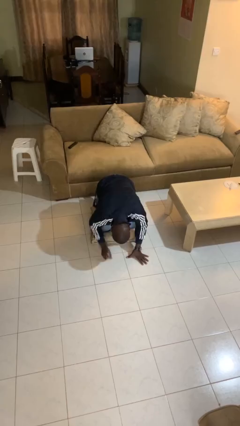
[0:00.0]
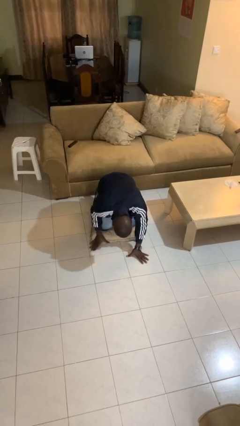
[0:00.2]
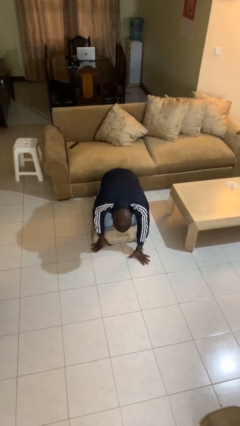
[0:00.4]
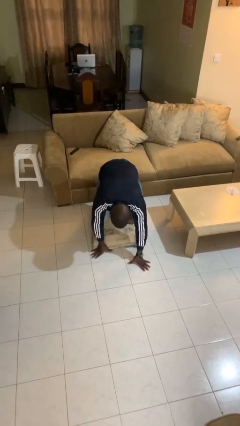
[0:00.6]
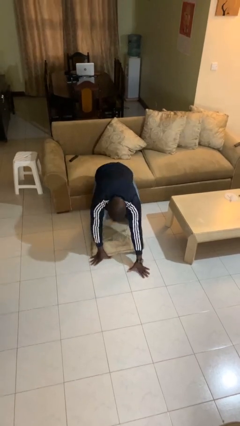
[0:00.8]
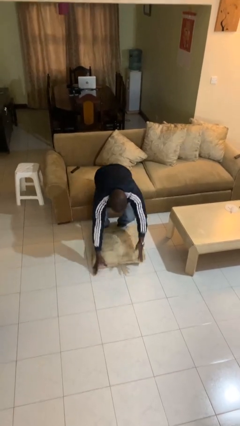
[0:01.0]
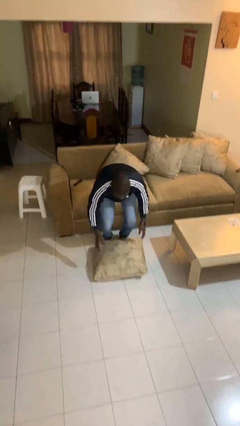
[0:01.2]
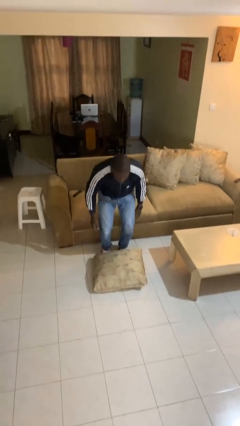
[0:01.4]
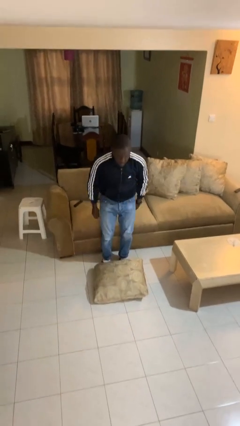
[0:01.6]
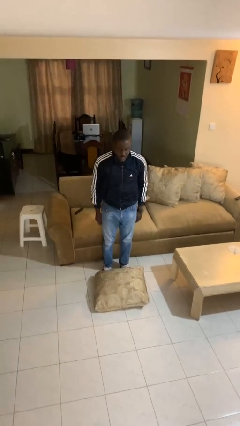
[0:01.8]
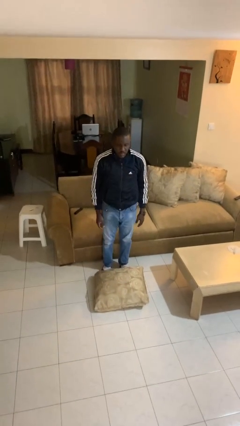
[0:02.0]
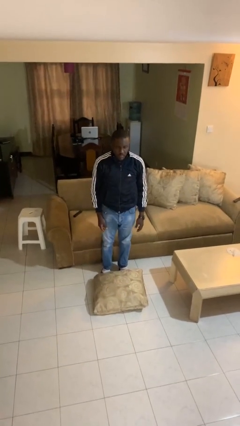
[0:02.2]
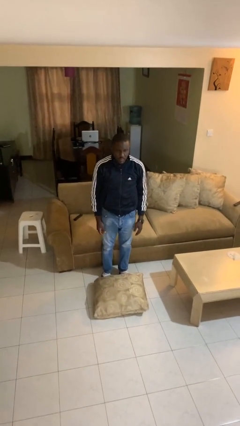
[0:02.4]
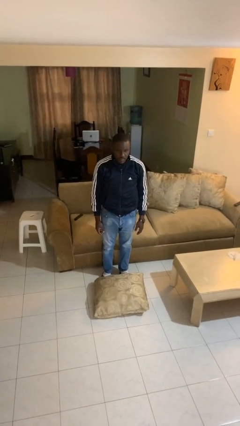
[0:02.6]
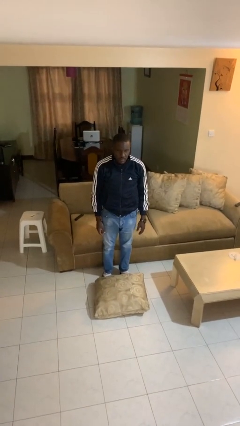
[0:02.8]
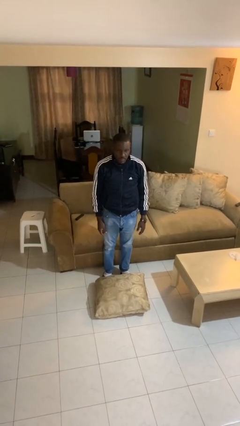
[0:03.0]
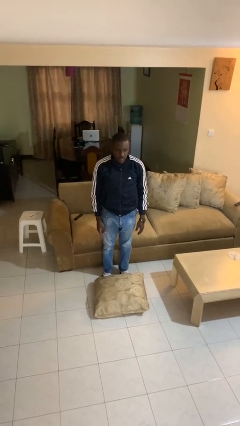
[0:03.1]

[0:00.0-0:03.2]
person stands up from floor

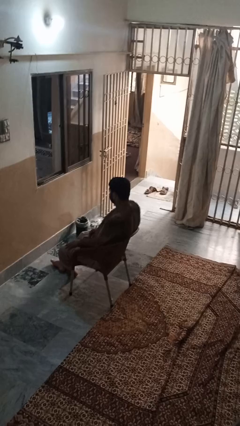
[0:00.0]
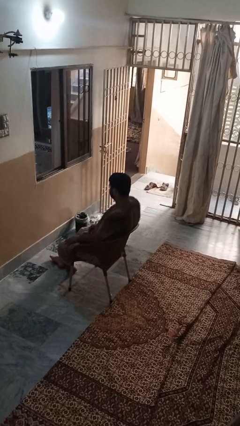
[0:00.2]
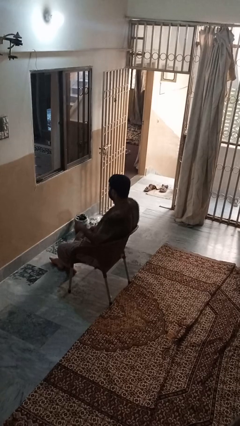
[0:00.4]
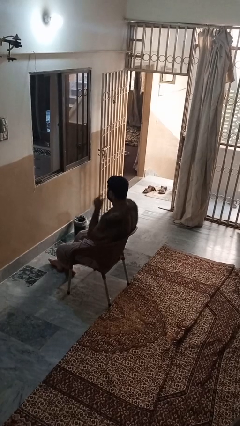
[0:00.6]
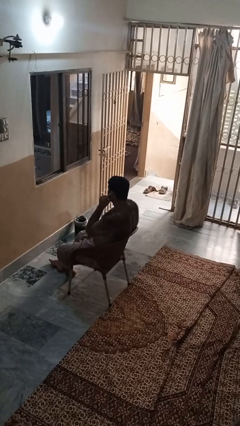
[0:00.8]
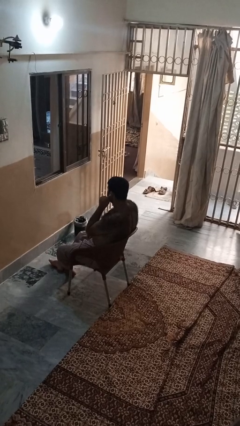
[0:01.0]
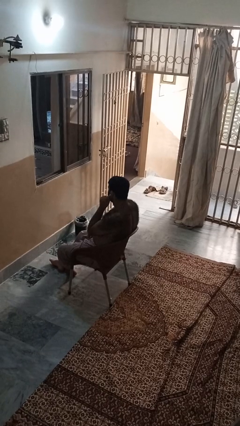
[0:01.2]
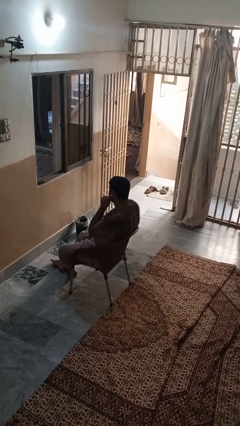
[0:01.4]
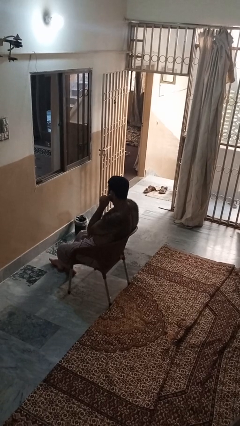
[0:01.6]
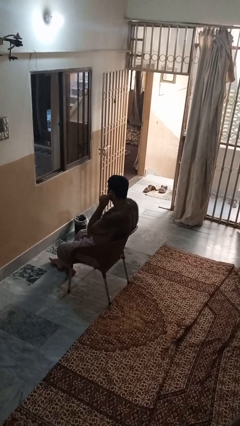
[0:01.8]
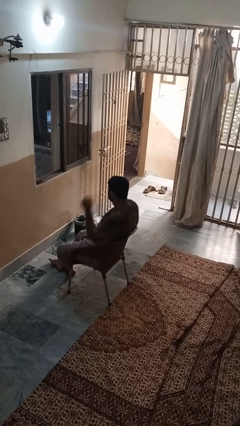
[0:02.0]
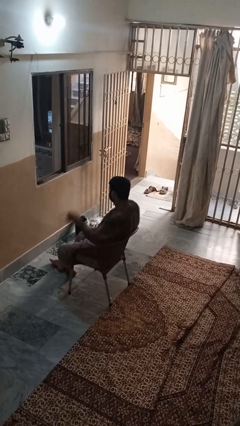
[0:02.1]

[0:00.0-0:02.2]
person touches earlobe

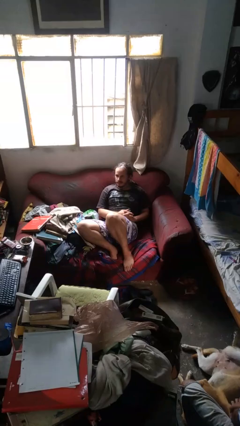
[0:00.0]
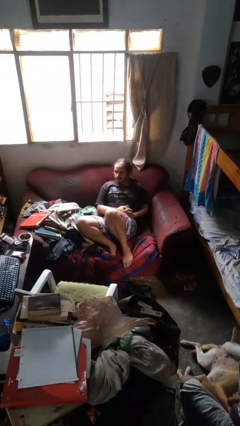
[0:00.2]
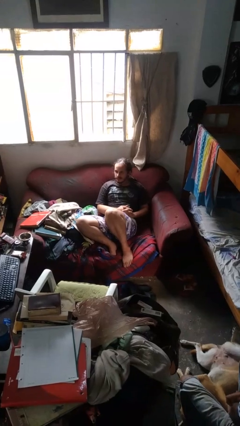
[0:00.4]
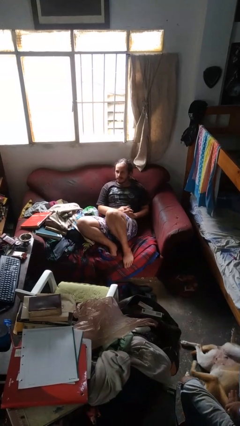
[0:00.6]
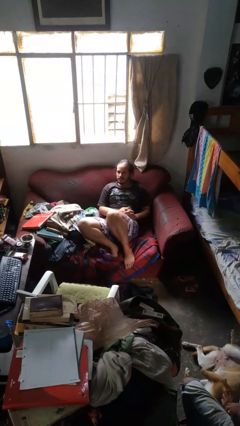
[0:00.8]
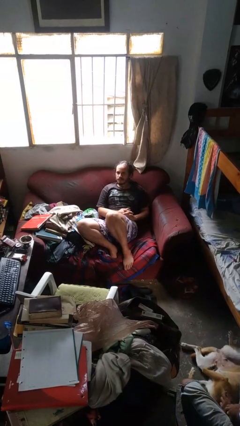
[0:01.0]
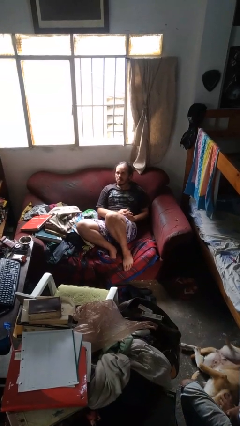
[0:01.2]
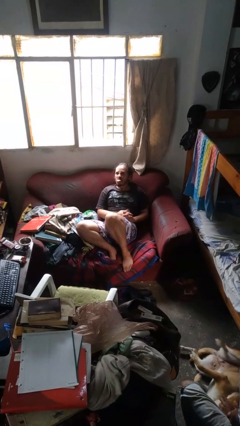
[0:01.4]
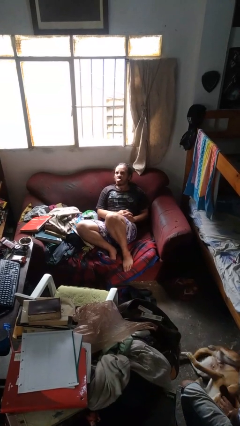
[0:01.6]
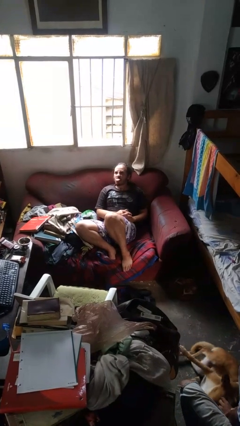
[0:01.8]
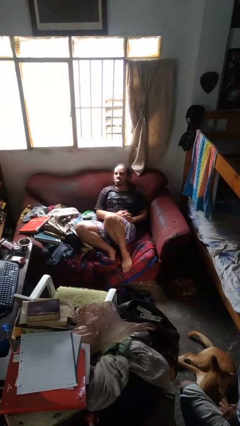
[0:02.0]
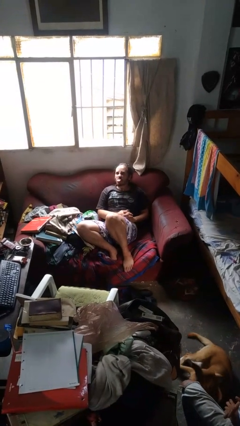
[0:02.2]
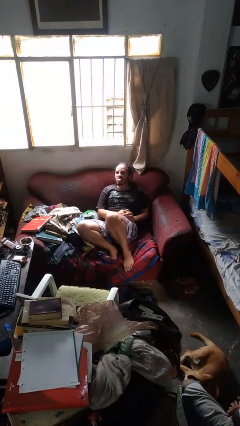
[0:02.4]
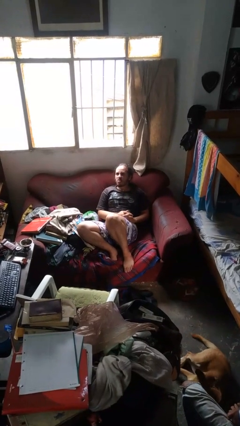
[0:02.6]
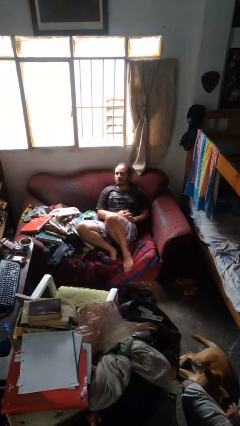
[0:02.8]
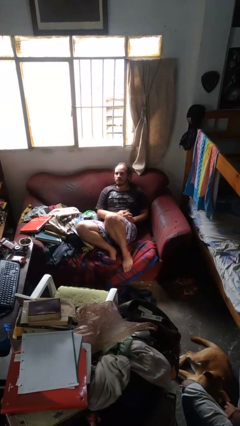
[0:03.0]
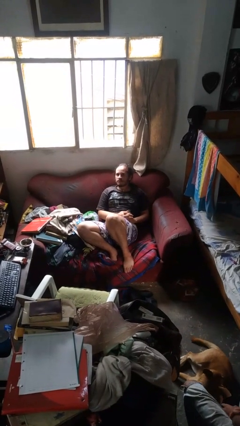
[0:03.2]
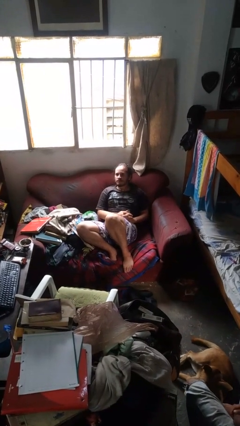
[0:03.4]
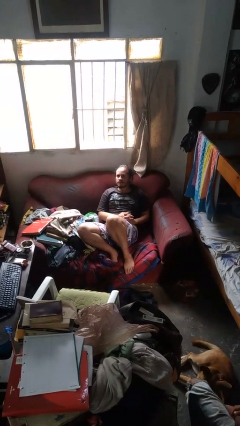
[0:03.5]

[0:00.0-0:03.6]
person sticks out tongue

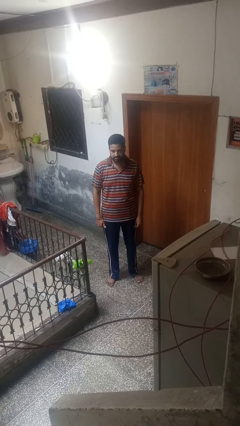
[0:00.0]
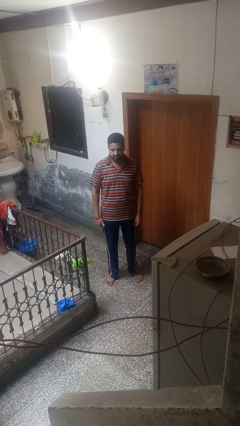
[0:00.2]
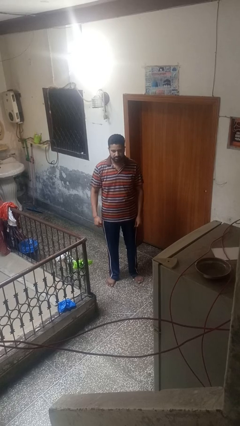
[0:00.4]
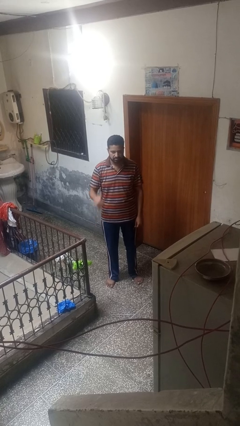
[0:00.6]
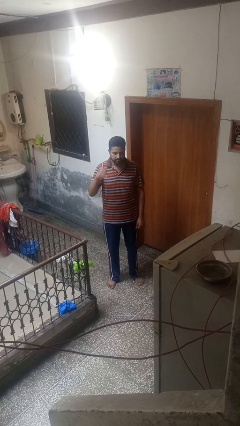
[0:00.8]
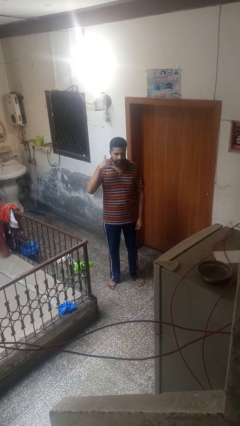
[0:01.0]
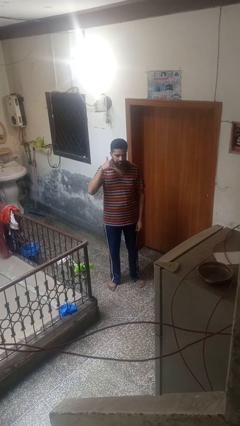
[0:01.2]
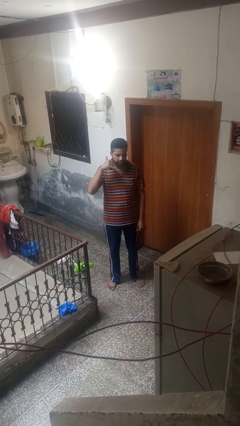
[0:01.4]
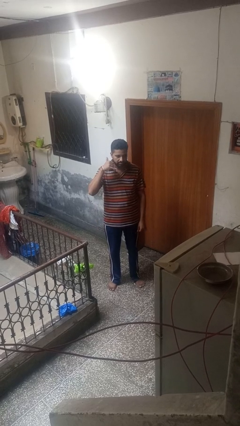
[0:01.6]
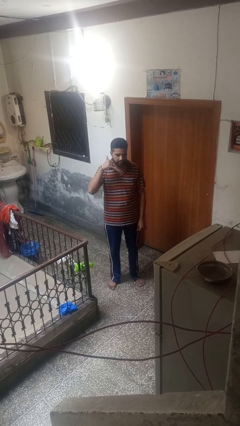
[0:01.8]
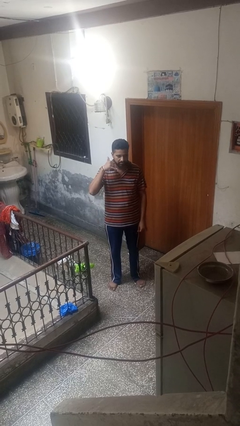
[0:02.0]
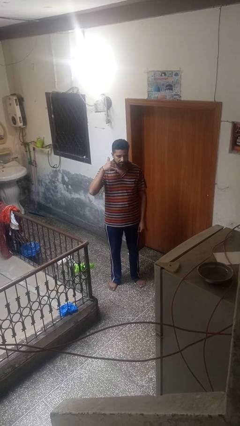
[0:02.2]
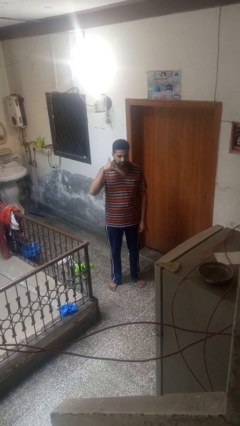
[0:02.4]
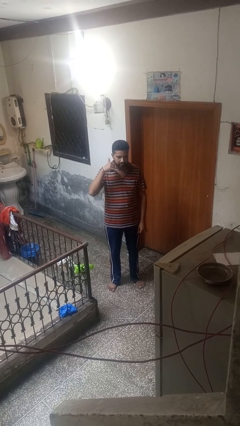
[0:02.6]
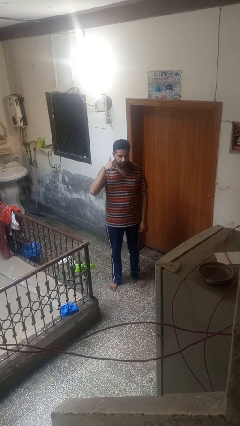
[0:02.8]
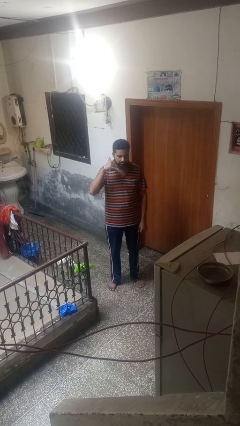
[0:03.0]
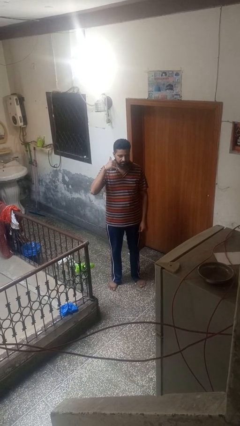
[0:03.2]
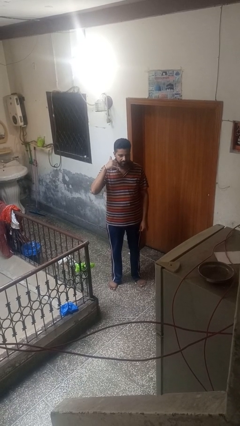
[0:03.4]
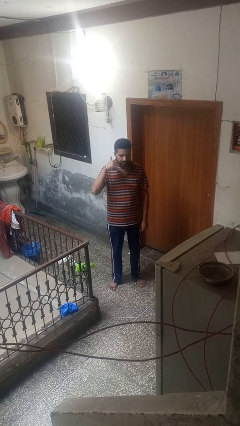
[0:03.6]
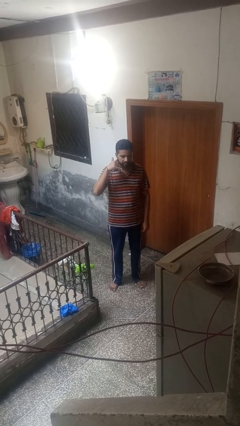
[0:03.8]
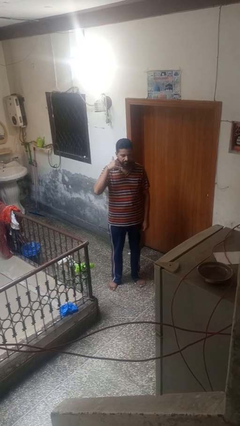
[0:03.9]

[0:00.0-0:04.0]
person gestures call me

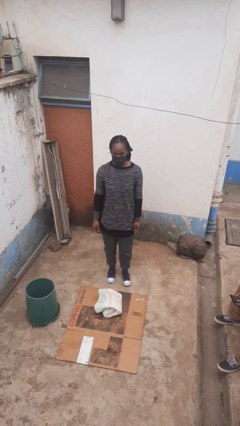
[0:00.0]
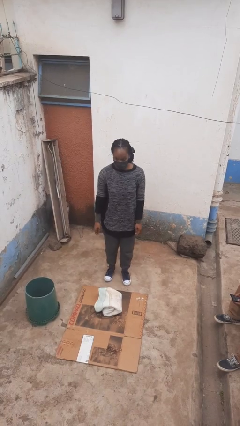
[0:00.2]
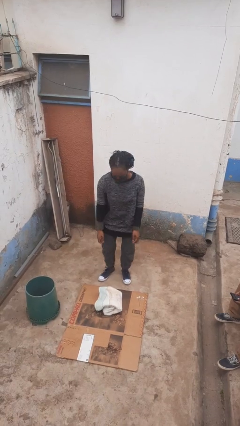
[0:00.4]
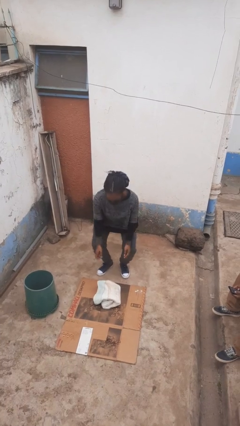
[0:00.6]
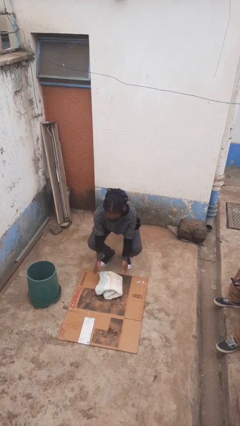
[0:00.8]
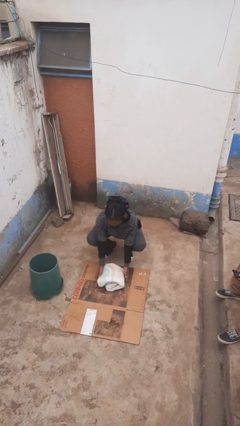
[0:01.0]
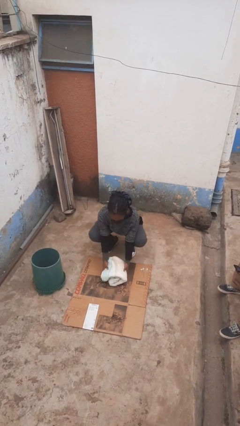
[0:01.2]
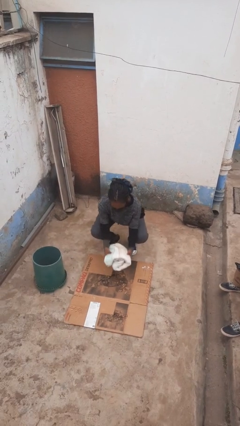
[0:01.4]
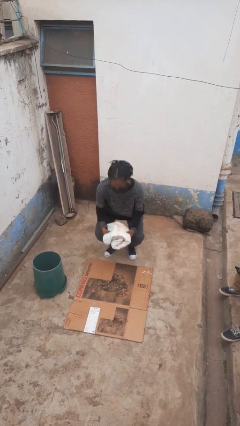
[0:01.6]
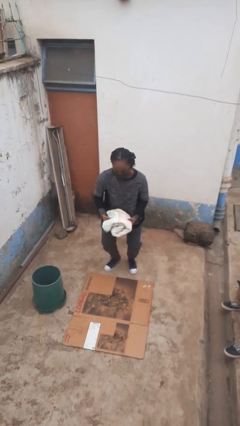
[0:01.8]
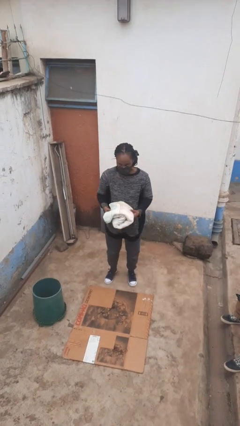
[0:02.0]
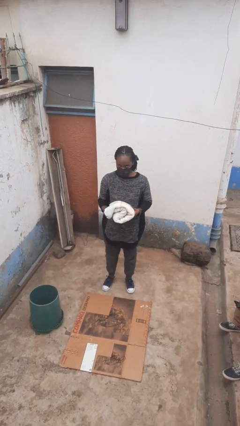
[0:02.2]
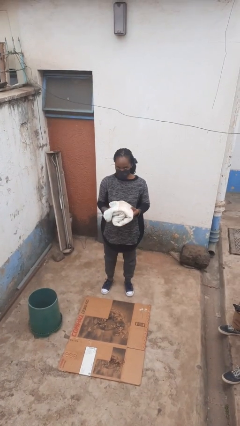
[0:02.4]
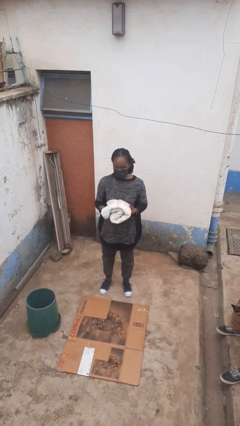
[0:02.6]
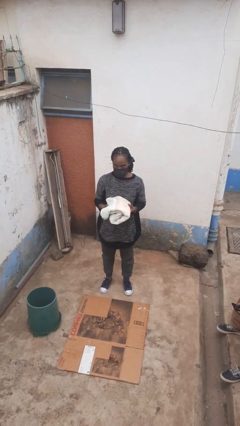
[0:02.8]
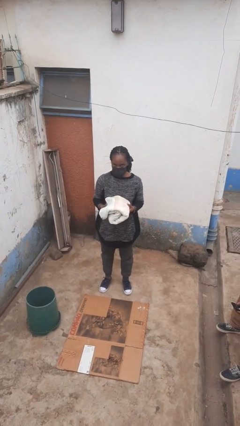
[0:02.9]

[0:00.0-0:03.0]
person picks up object from floor

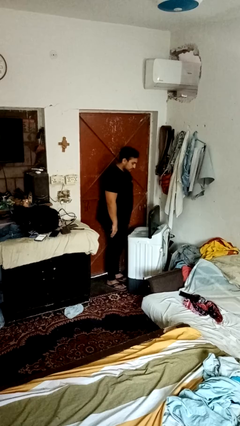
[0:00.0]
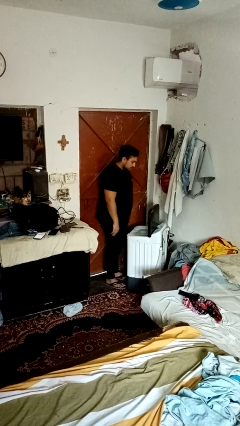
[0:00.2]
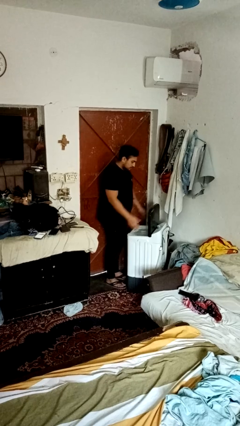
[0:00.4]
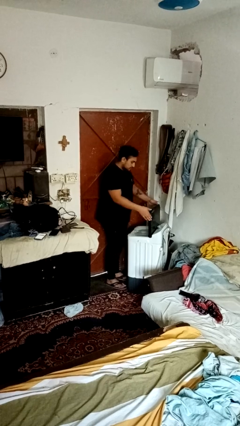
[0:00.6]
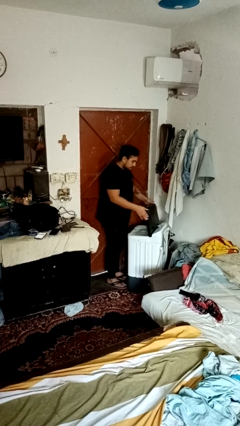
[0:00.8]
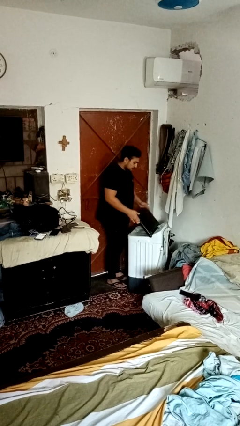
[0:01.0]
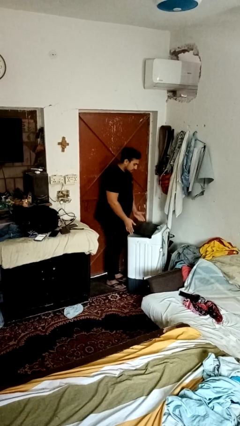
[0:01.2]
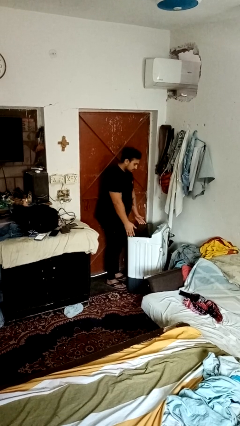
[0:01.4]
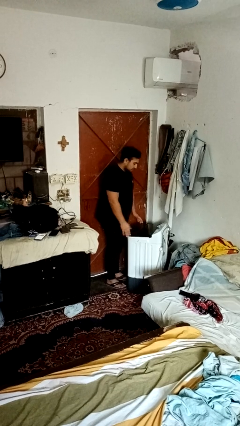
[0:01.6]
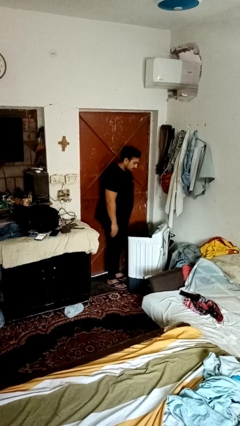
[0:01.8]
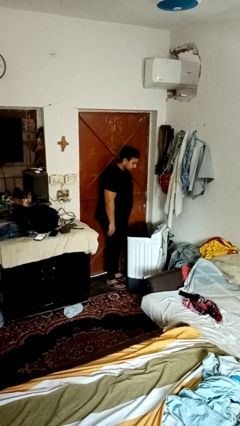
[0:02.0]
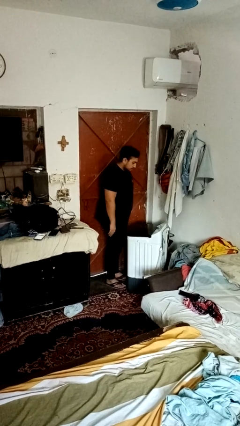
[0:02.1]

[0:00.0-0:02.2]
person closes clothes washer
